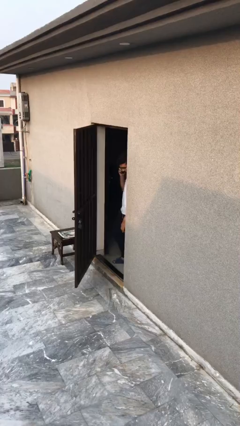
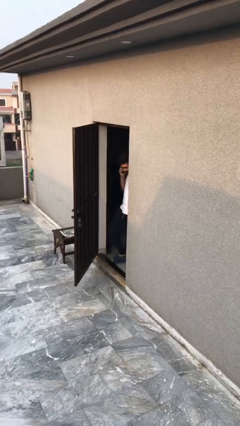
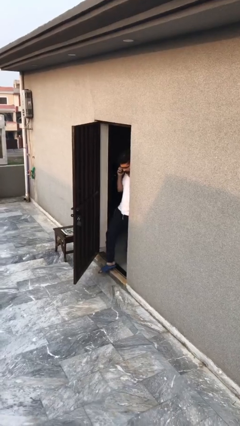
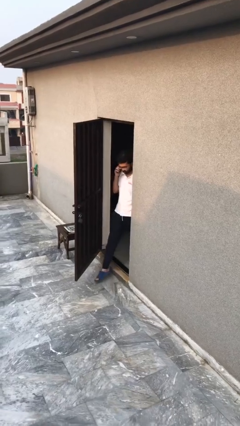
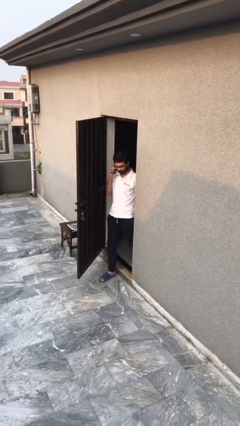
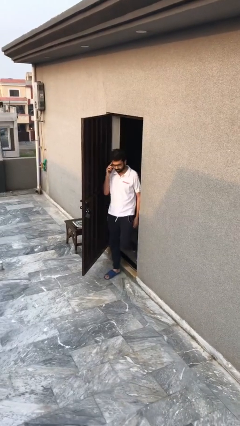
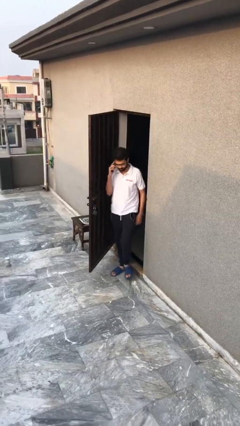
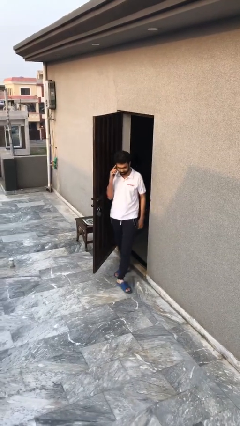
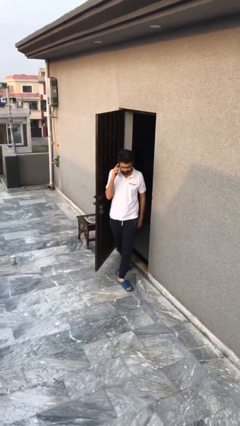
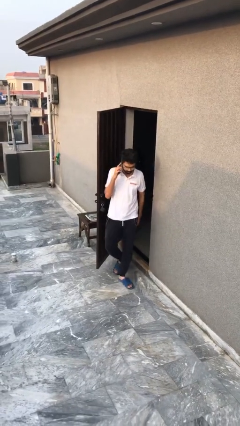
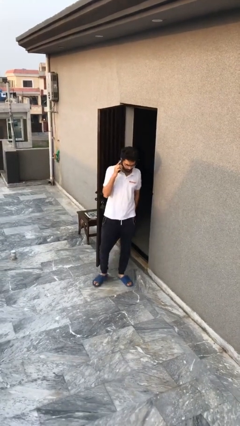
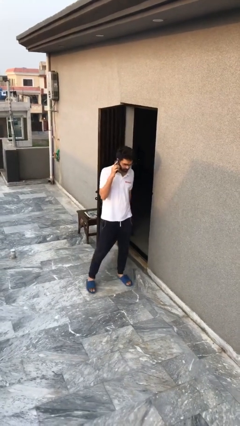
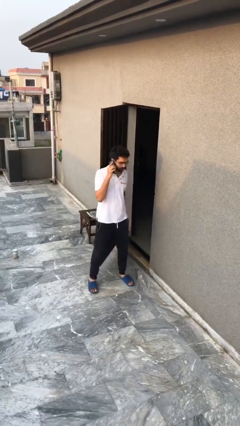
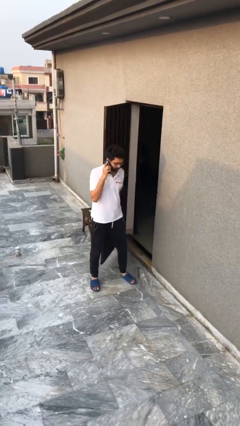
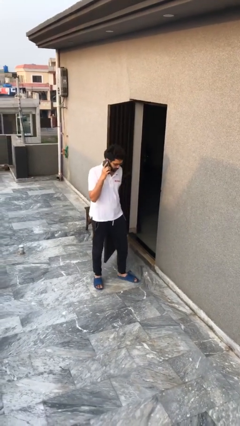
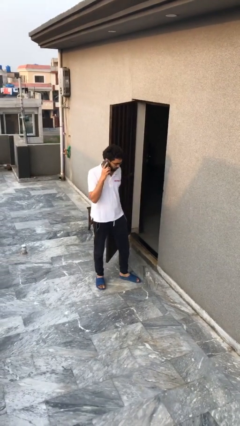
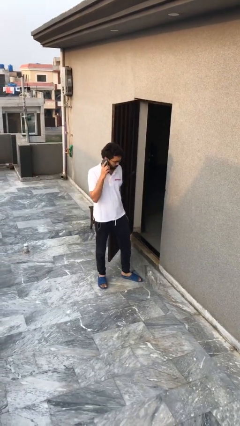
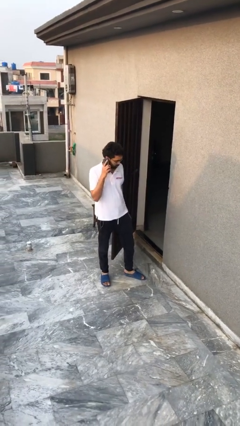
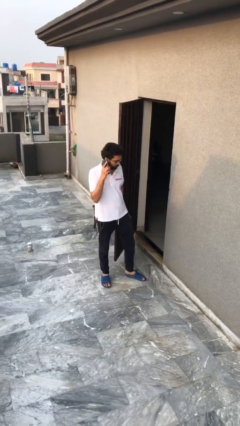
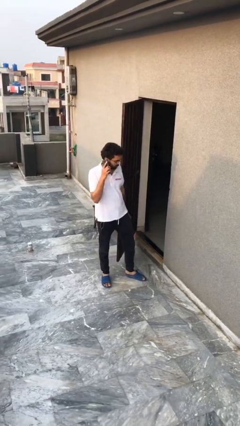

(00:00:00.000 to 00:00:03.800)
person enters scene through structure

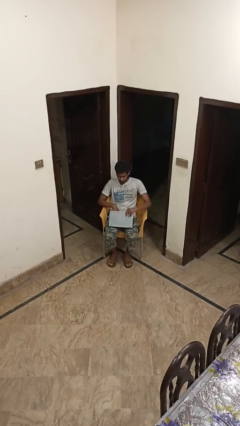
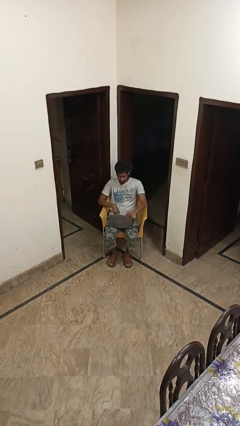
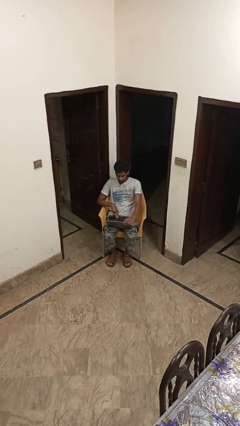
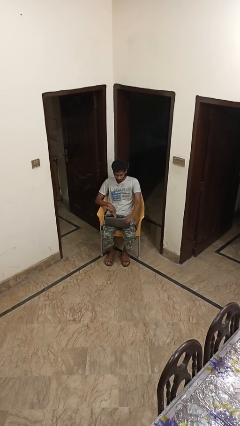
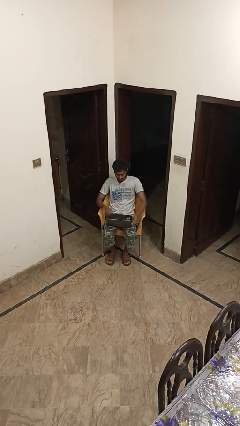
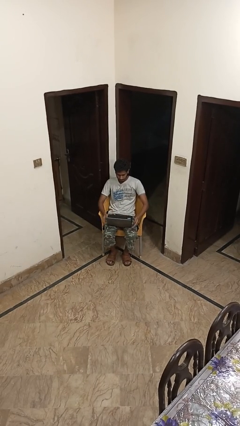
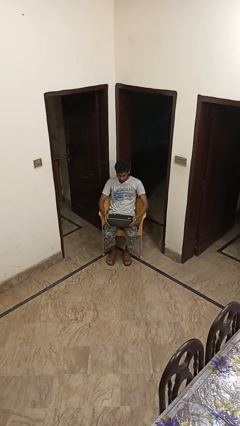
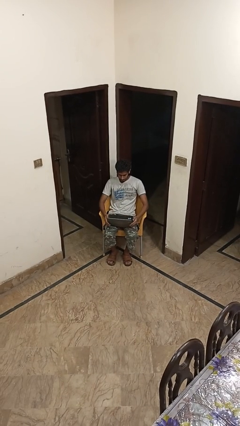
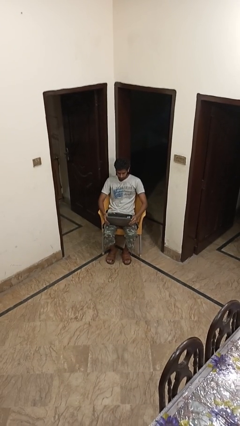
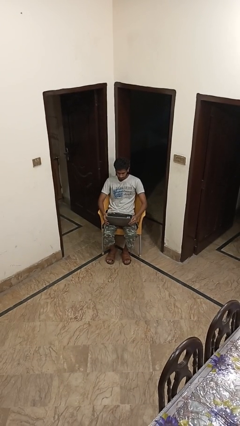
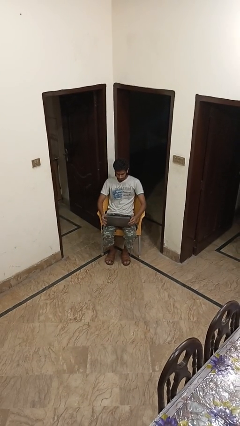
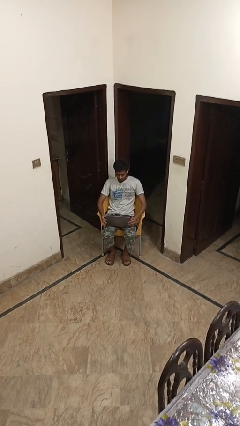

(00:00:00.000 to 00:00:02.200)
person opens laptop

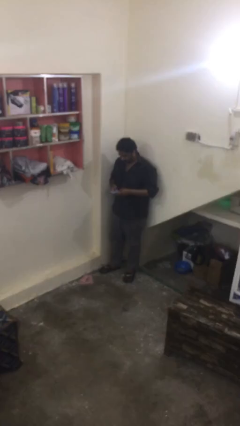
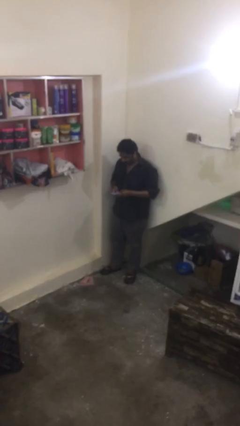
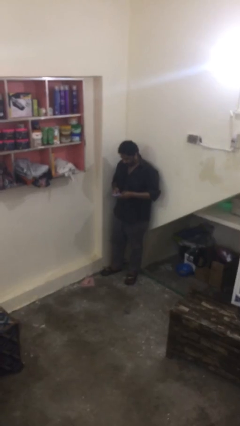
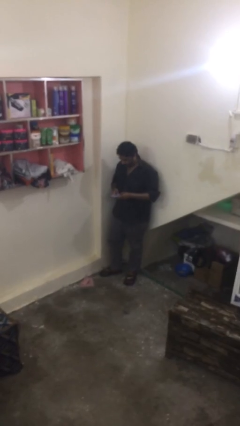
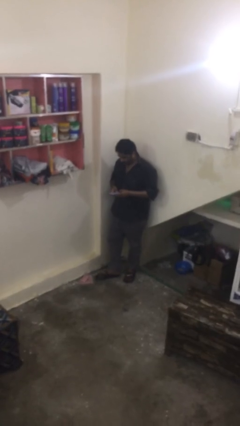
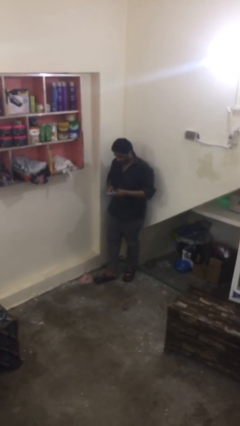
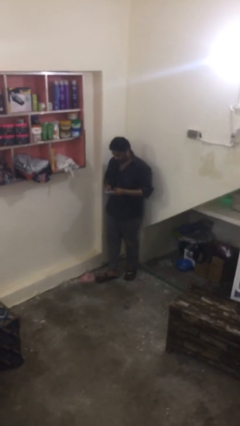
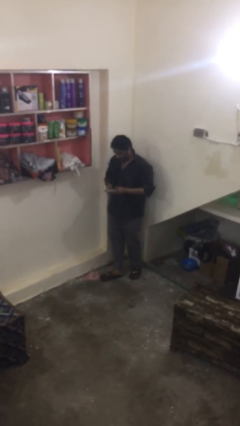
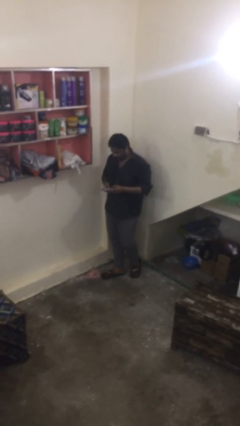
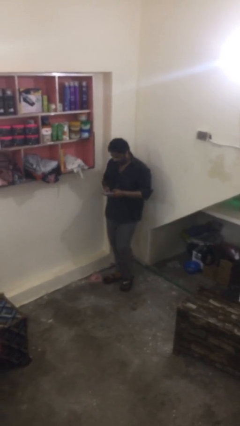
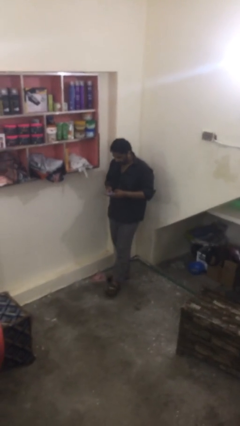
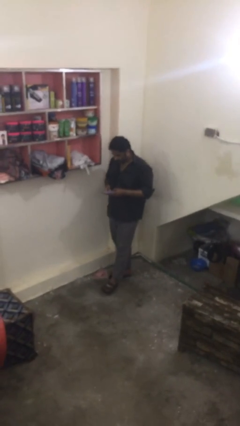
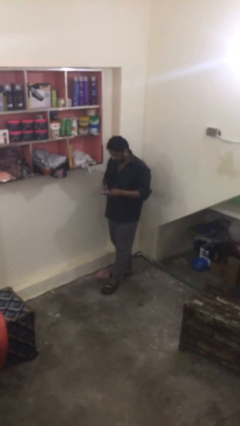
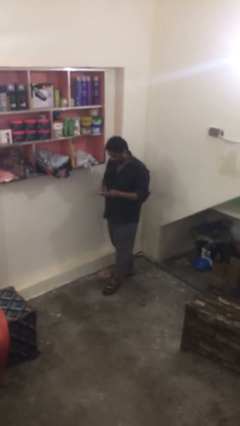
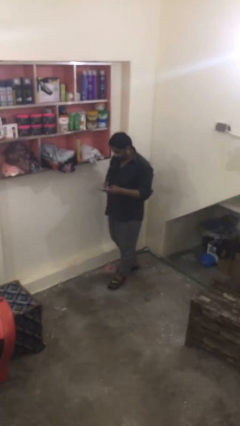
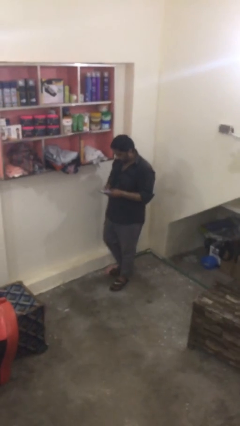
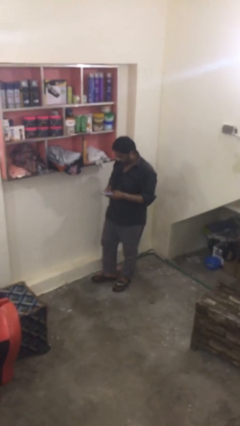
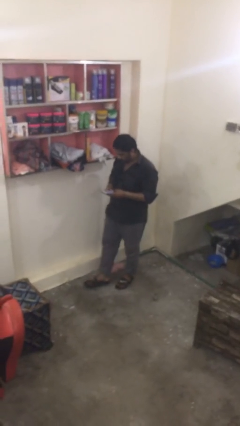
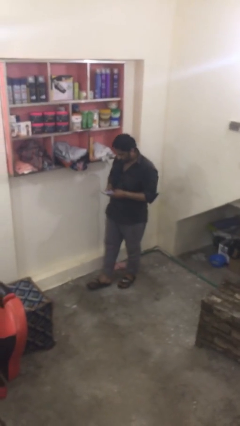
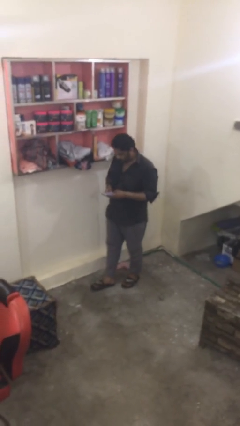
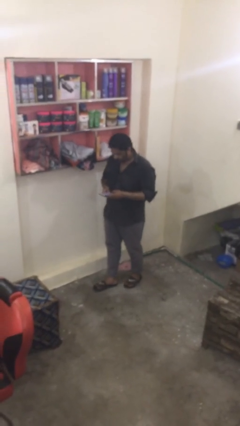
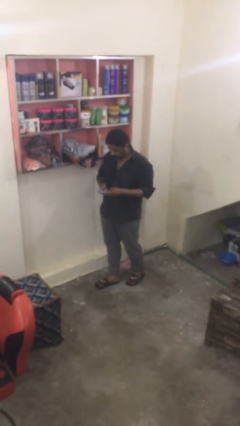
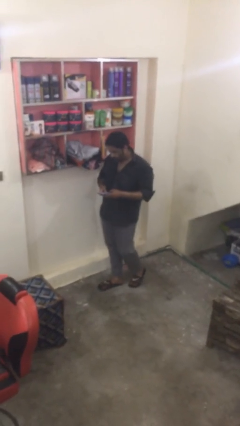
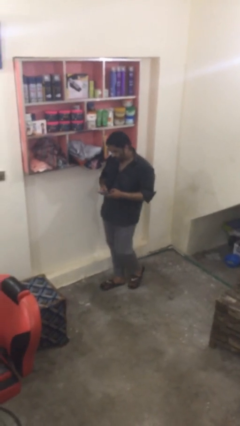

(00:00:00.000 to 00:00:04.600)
person texts on phone

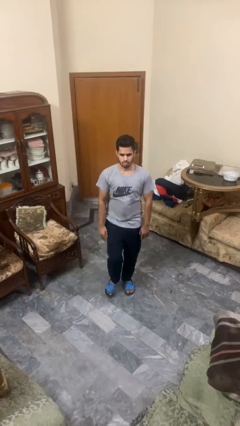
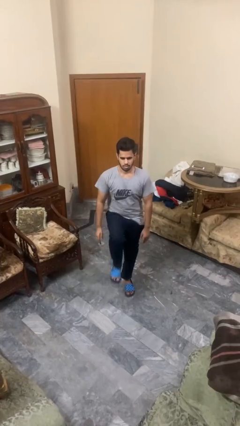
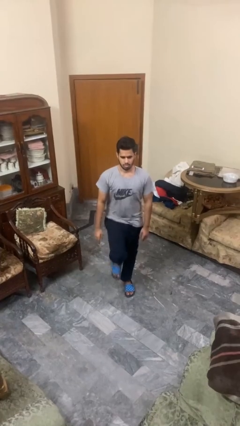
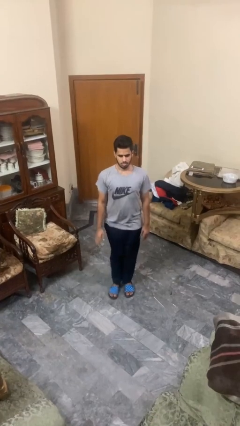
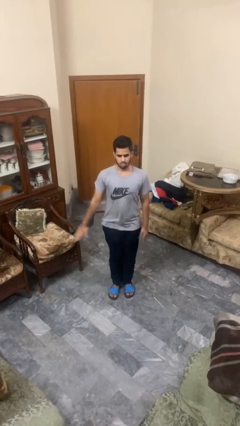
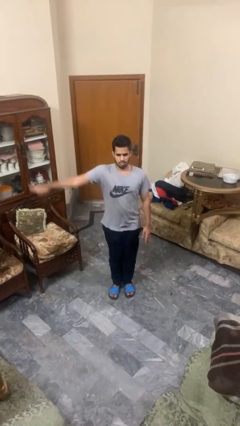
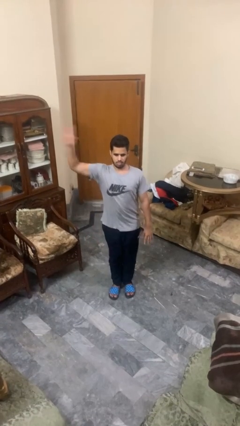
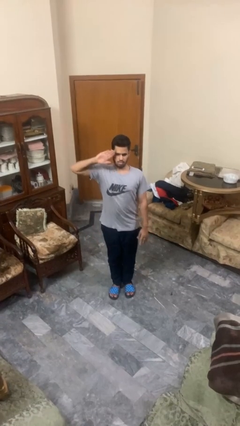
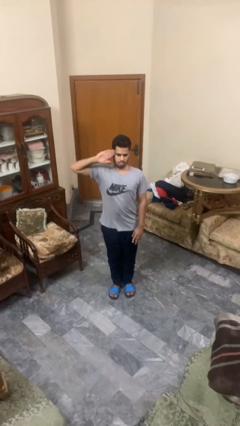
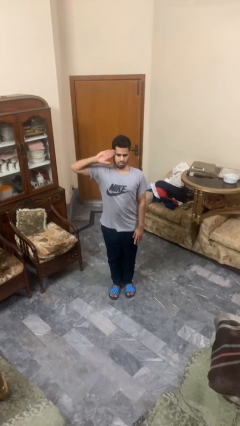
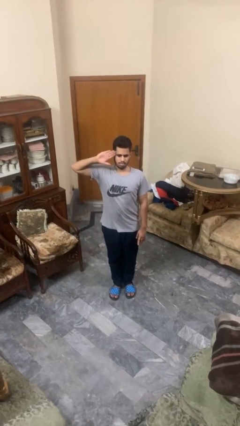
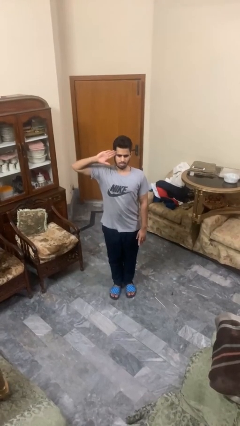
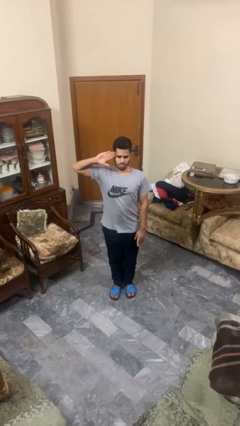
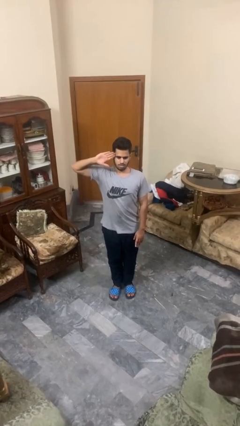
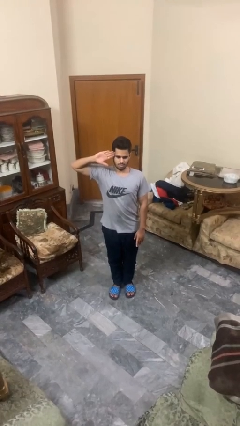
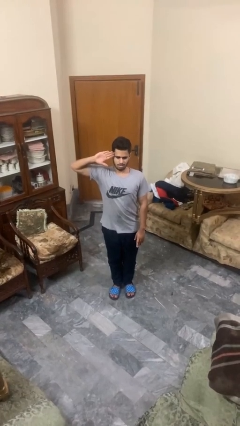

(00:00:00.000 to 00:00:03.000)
person salutes

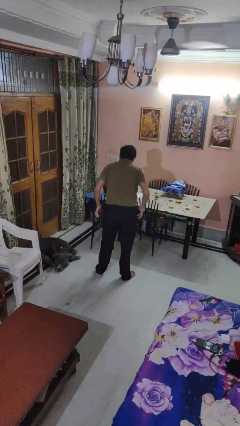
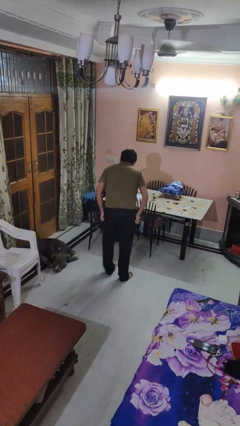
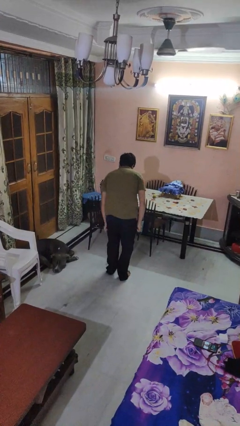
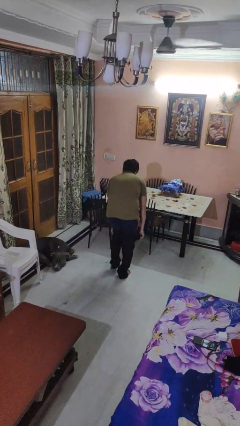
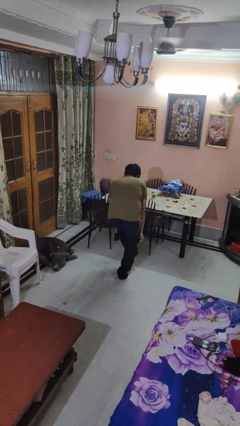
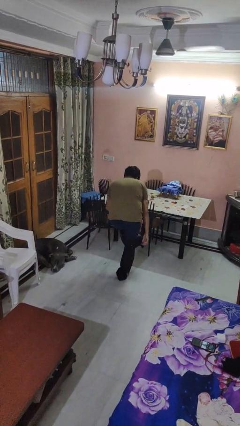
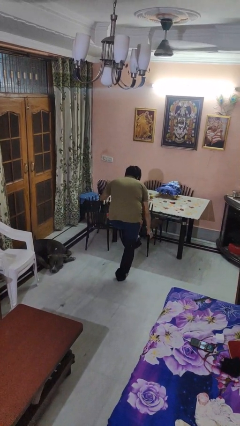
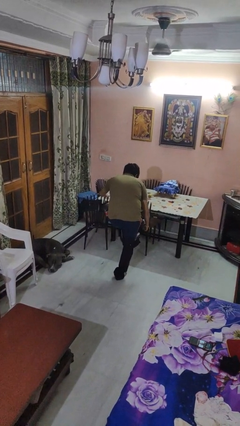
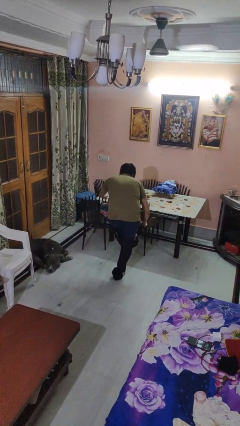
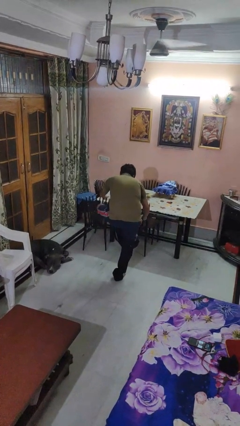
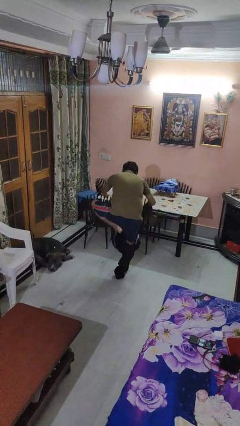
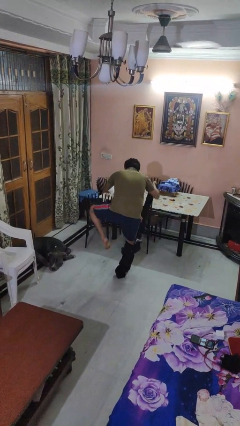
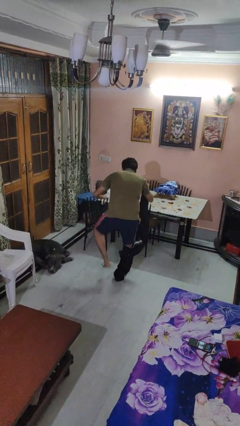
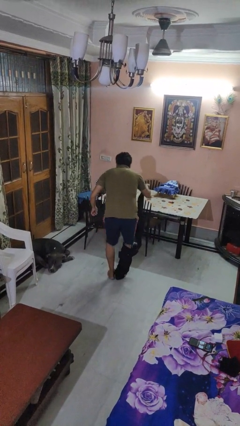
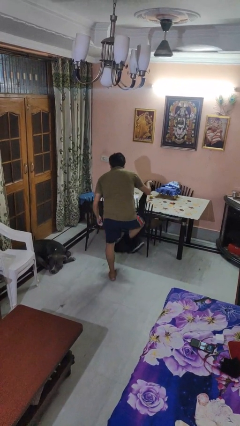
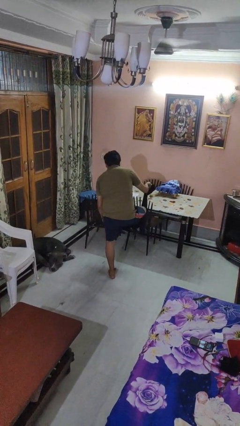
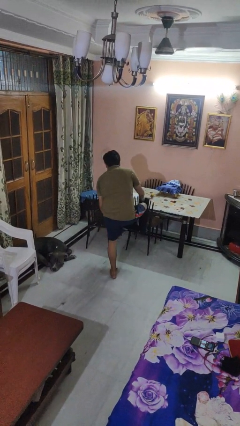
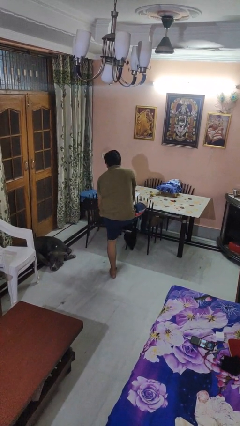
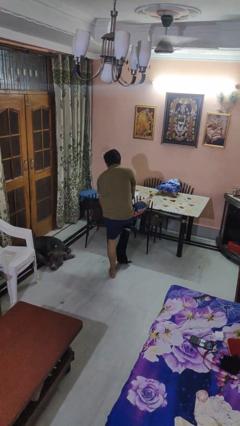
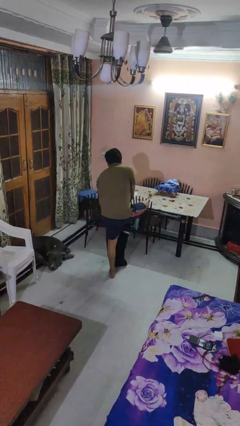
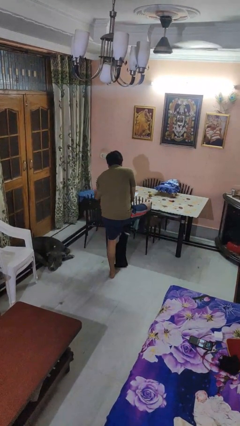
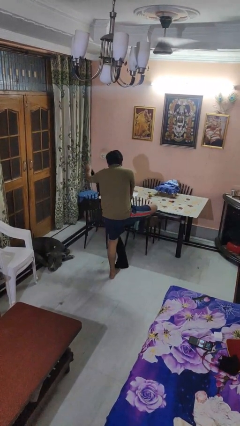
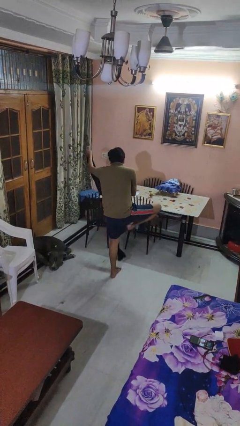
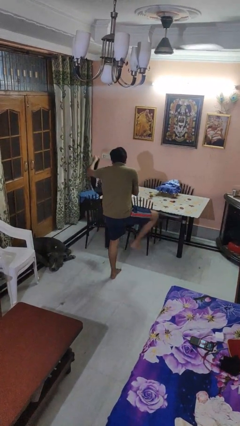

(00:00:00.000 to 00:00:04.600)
person takes off pants
